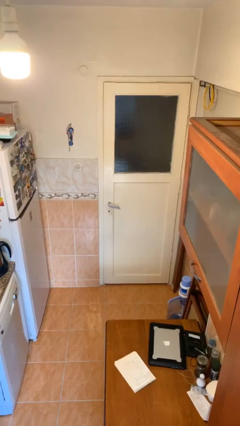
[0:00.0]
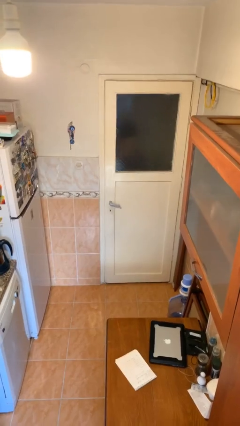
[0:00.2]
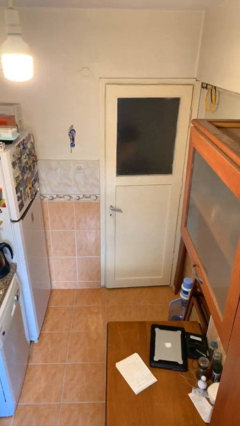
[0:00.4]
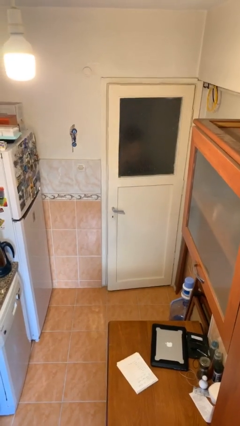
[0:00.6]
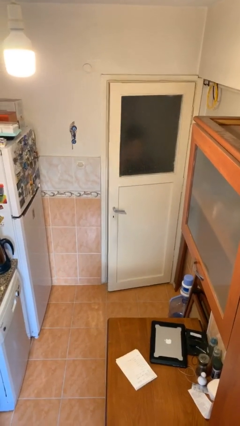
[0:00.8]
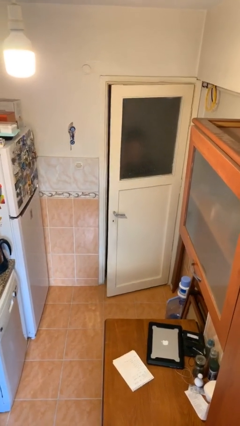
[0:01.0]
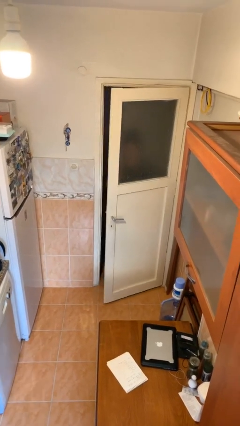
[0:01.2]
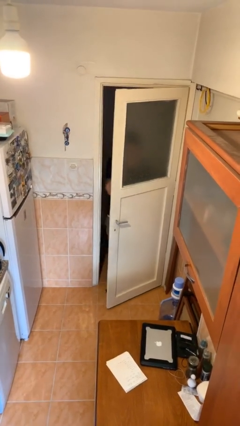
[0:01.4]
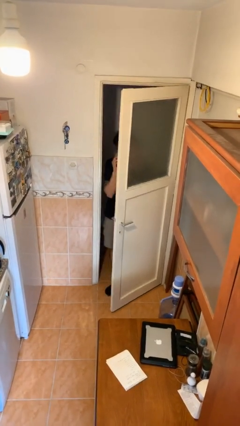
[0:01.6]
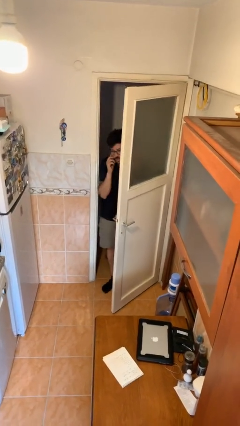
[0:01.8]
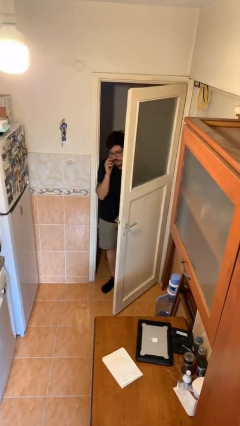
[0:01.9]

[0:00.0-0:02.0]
person opens facility door

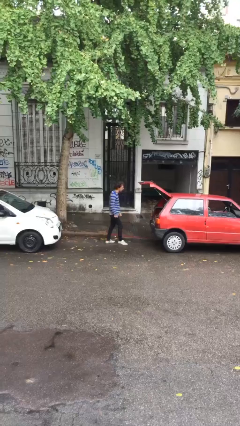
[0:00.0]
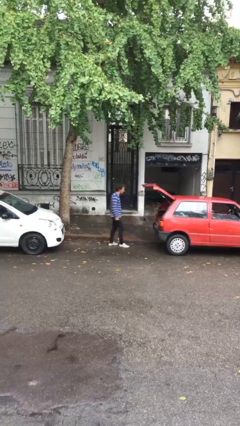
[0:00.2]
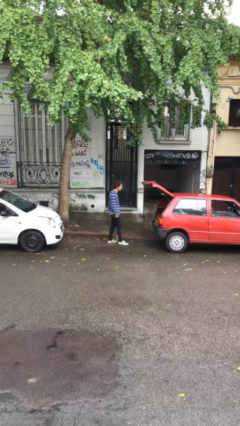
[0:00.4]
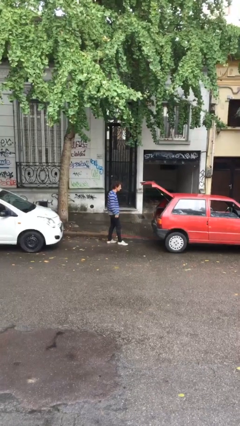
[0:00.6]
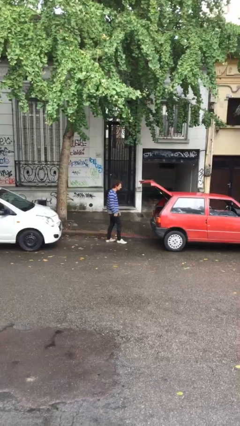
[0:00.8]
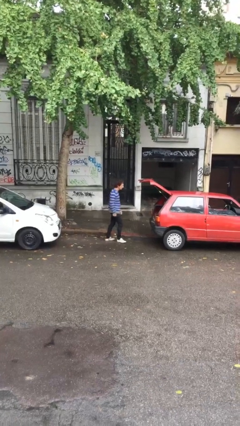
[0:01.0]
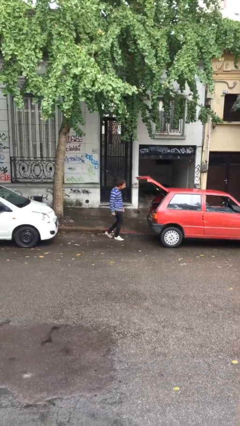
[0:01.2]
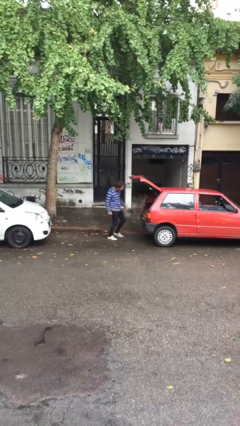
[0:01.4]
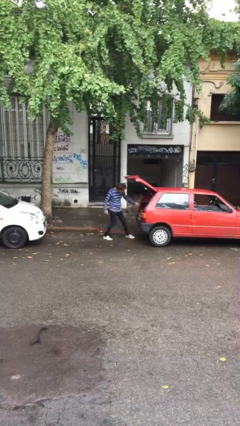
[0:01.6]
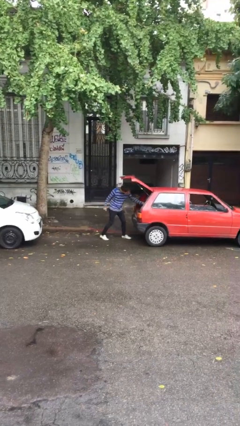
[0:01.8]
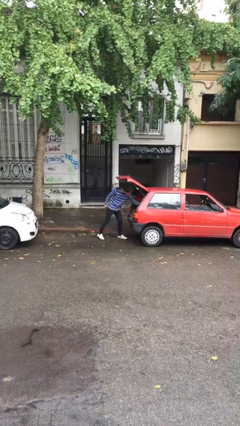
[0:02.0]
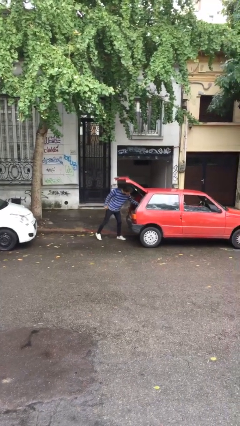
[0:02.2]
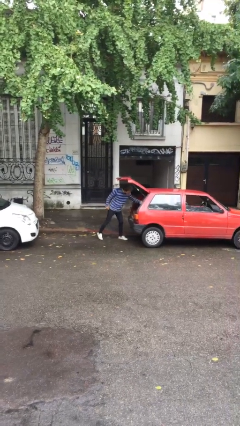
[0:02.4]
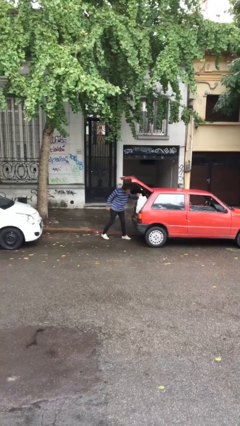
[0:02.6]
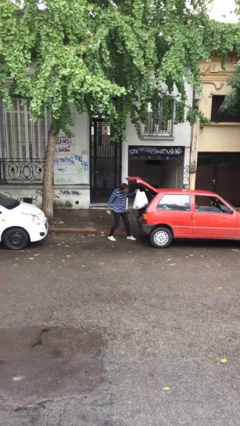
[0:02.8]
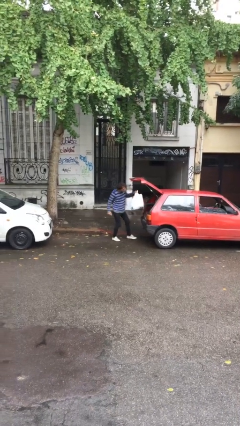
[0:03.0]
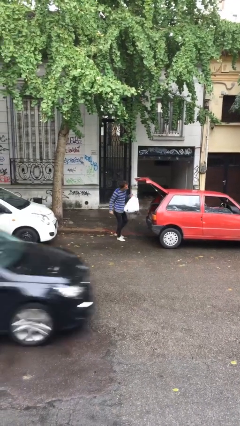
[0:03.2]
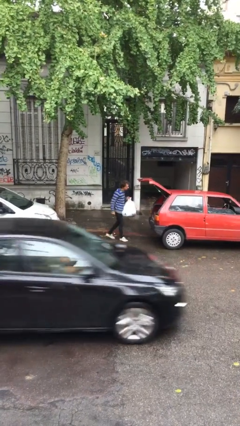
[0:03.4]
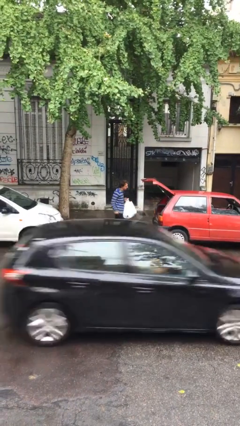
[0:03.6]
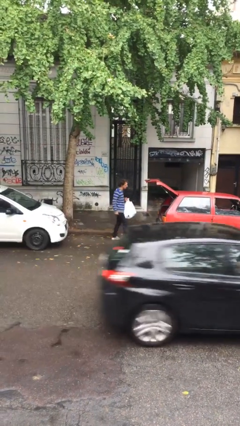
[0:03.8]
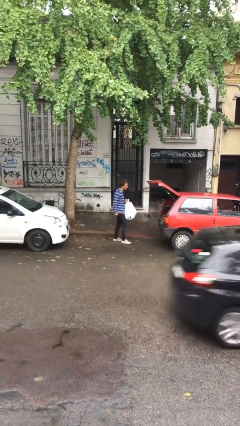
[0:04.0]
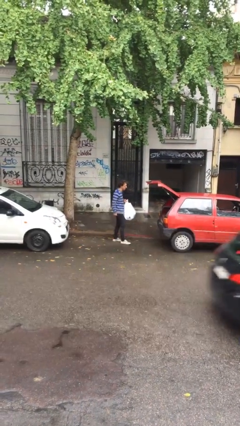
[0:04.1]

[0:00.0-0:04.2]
person unloads car

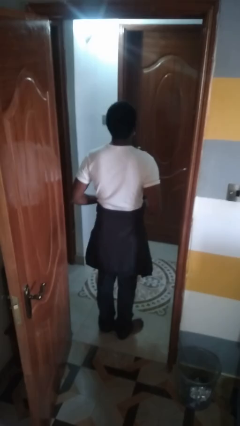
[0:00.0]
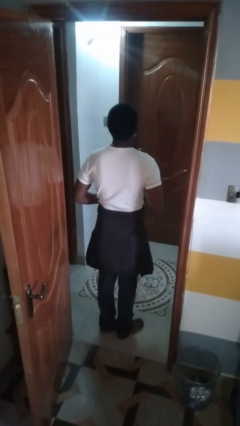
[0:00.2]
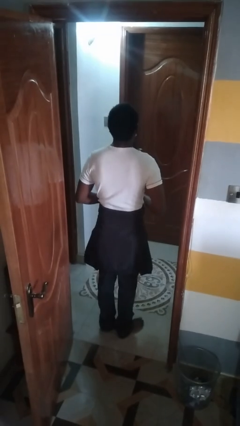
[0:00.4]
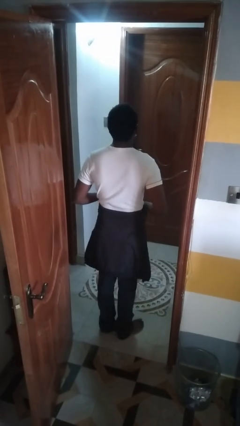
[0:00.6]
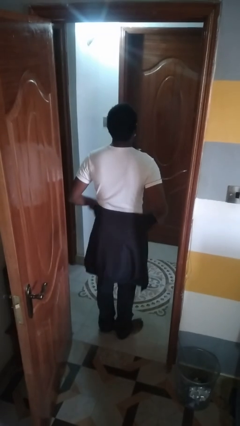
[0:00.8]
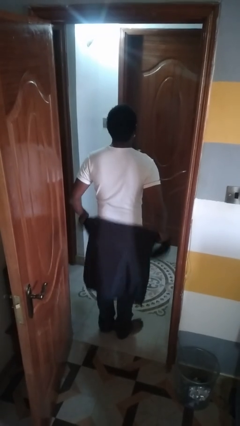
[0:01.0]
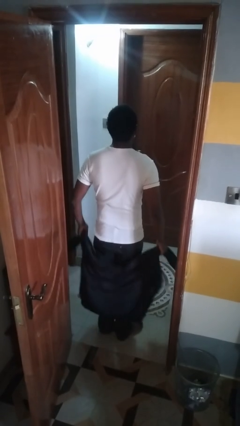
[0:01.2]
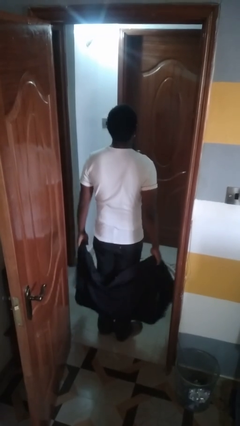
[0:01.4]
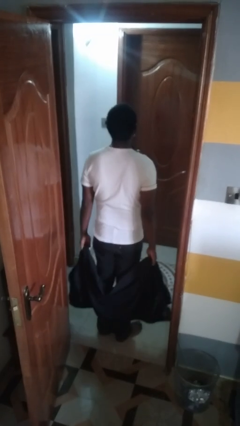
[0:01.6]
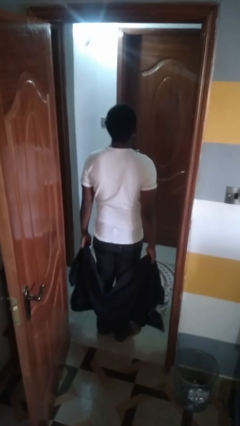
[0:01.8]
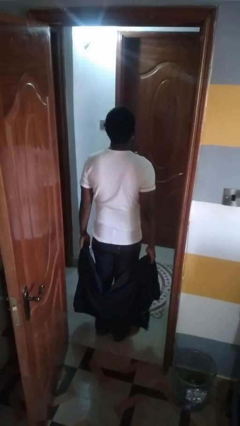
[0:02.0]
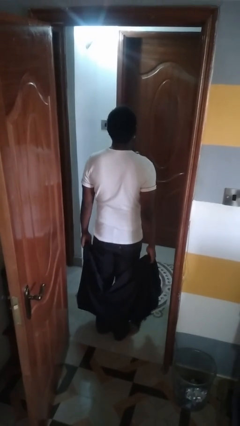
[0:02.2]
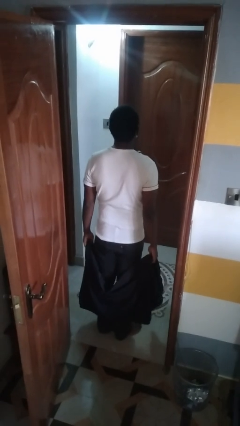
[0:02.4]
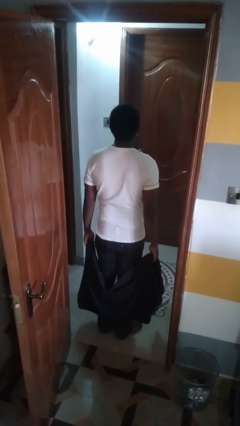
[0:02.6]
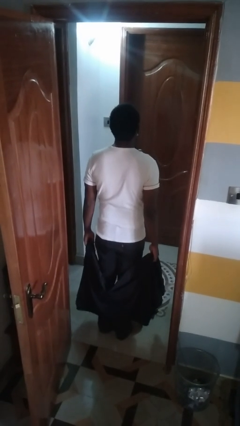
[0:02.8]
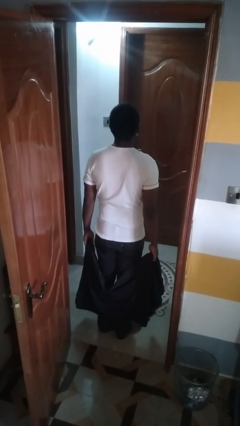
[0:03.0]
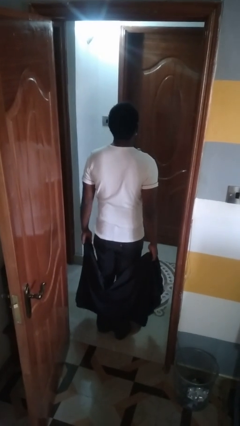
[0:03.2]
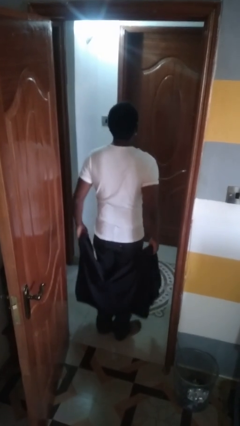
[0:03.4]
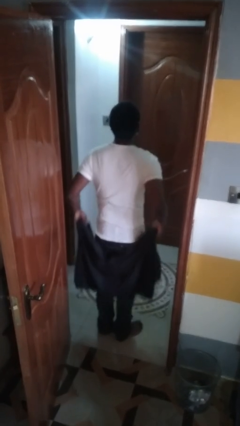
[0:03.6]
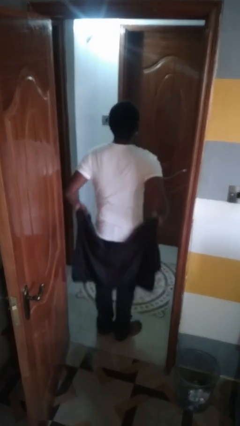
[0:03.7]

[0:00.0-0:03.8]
person unties jacket around waist

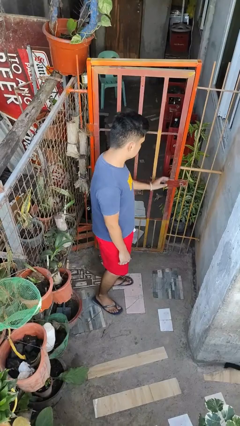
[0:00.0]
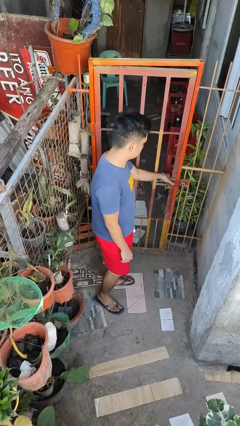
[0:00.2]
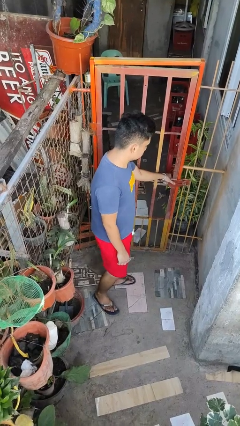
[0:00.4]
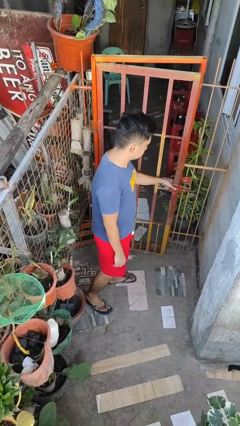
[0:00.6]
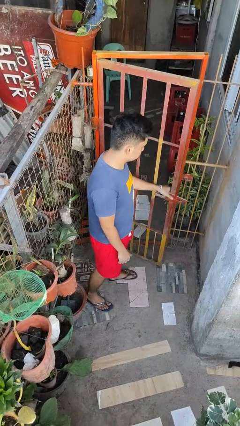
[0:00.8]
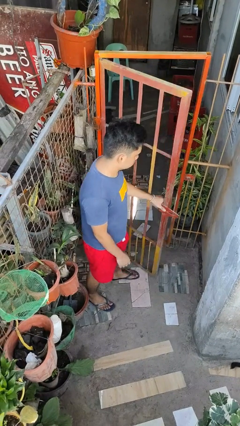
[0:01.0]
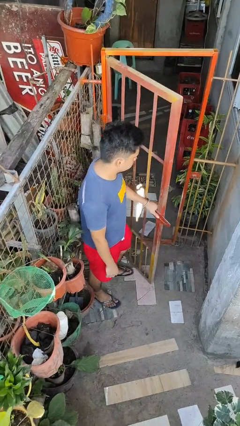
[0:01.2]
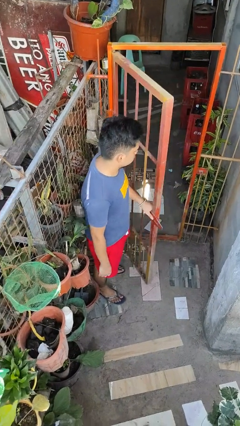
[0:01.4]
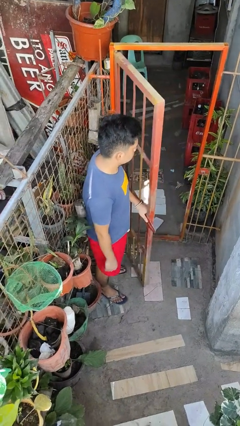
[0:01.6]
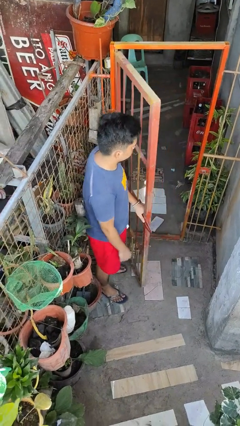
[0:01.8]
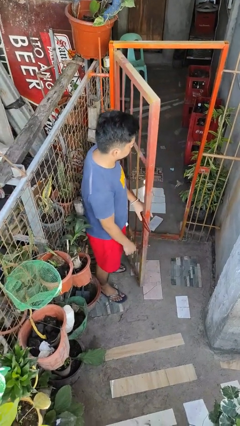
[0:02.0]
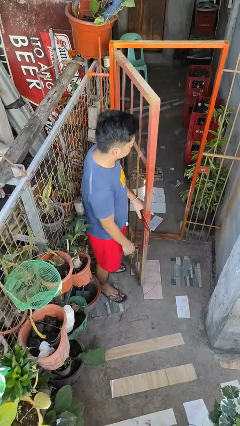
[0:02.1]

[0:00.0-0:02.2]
person opens gate

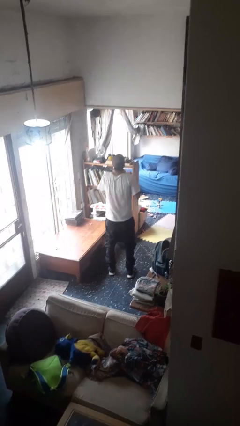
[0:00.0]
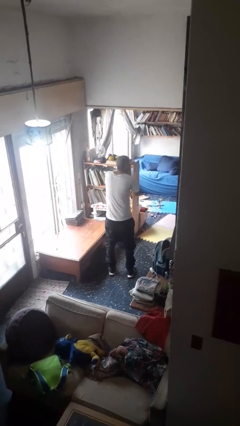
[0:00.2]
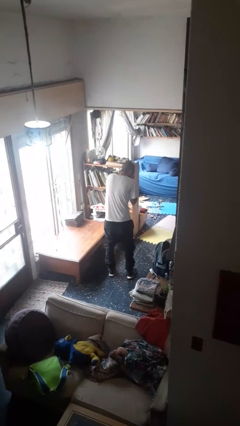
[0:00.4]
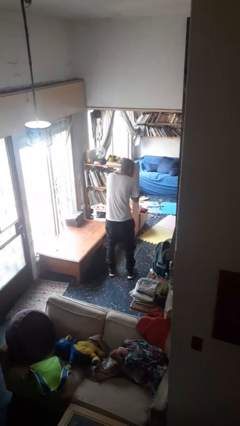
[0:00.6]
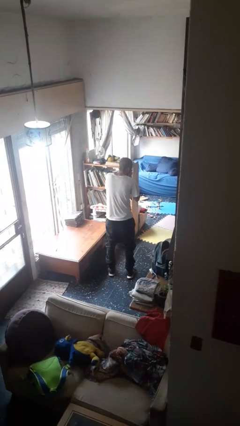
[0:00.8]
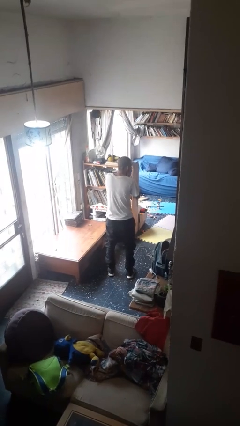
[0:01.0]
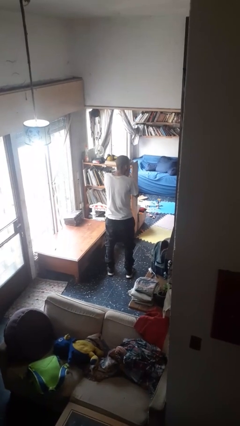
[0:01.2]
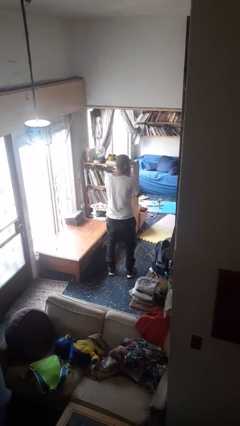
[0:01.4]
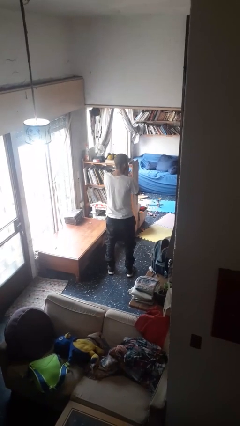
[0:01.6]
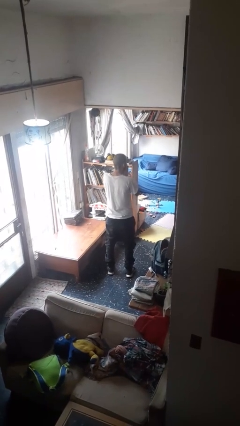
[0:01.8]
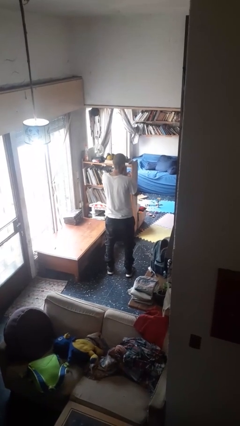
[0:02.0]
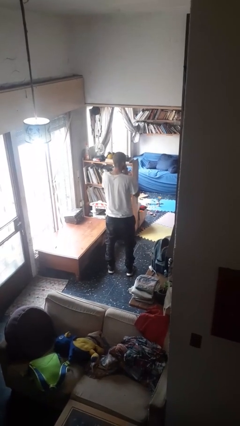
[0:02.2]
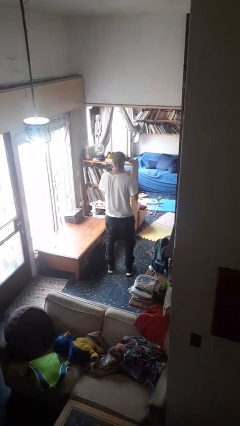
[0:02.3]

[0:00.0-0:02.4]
person sneezes into hand

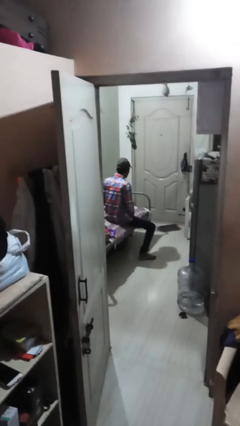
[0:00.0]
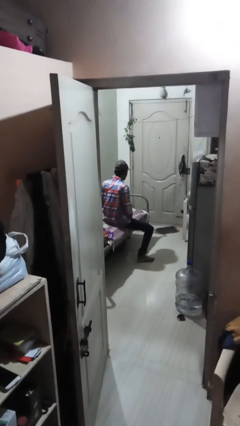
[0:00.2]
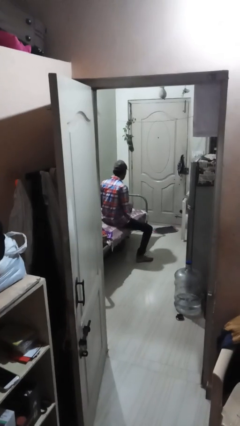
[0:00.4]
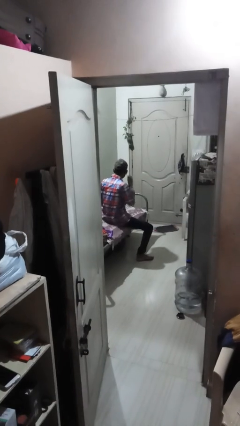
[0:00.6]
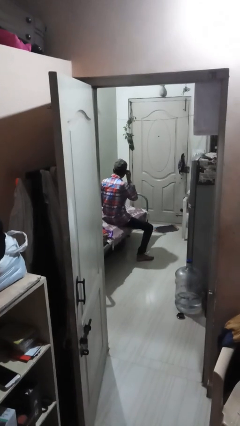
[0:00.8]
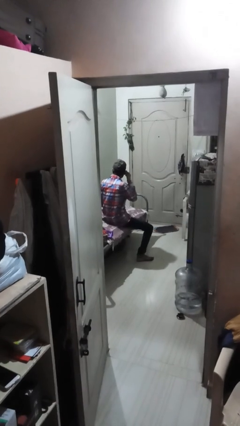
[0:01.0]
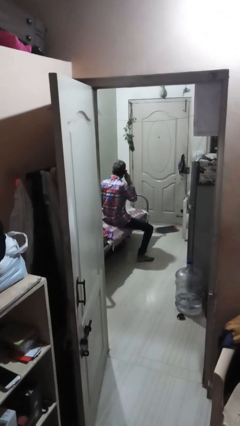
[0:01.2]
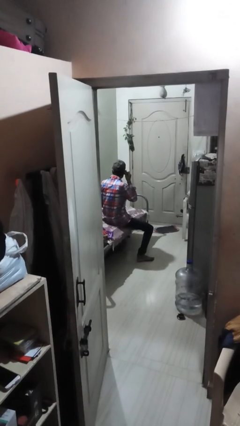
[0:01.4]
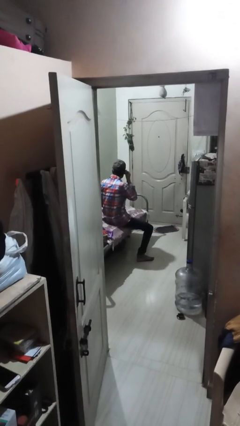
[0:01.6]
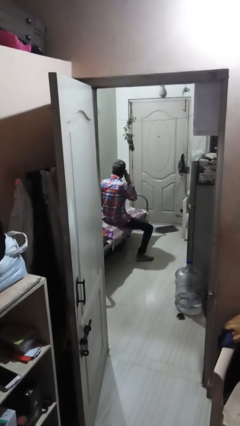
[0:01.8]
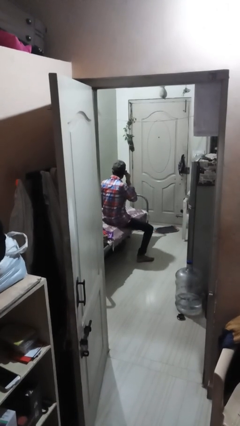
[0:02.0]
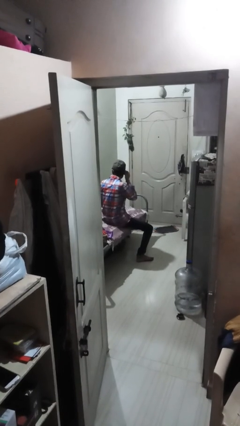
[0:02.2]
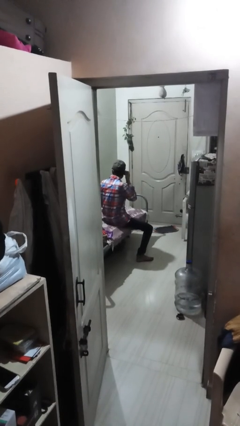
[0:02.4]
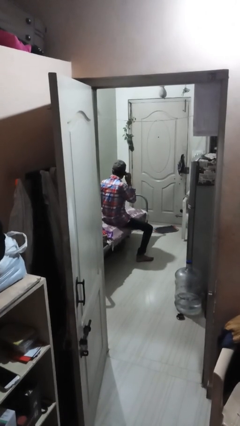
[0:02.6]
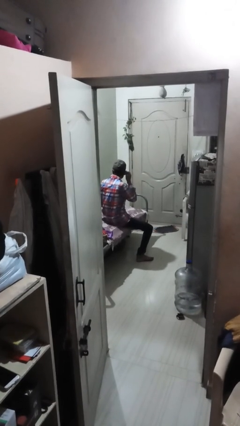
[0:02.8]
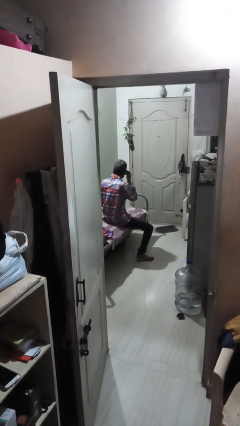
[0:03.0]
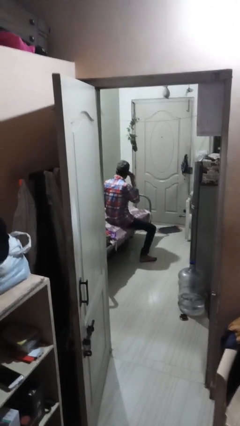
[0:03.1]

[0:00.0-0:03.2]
person touches earlobe
